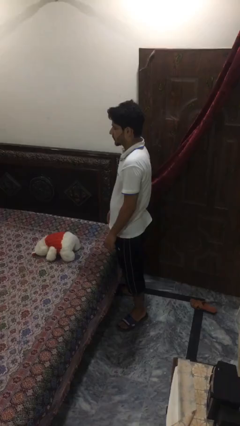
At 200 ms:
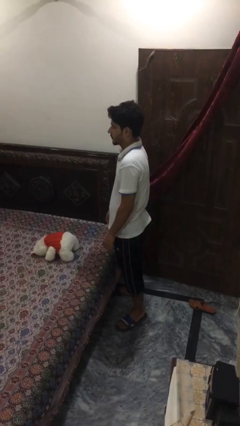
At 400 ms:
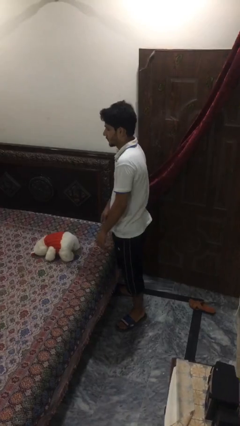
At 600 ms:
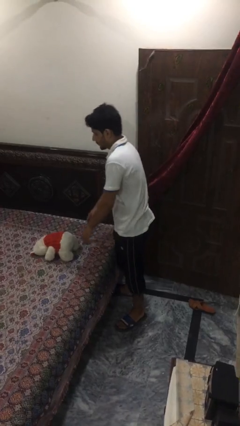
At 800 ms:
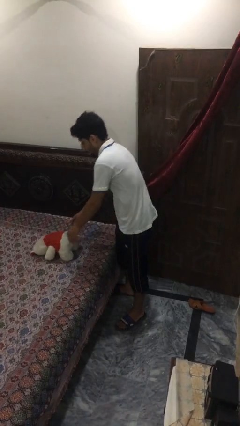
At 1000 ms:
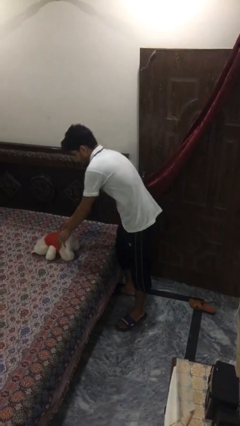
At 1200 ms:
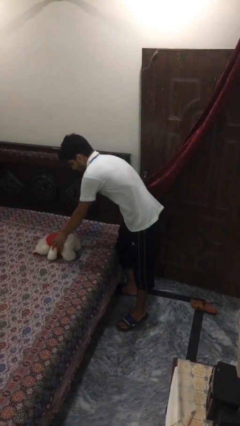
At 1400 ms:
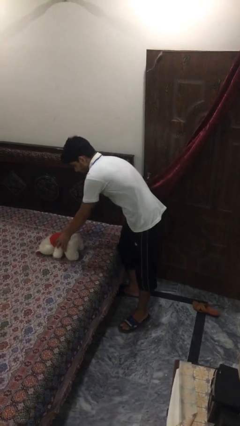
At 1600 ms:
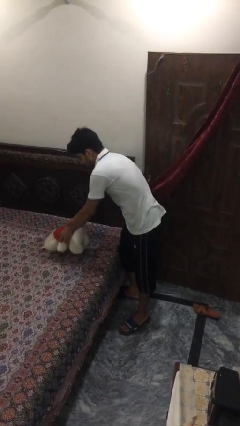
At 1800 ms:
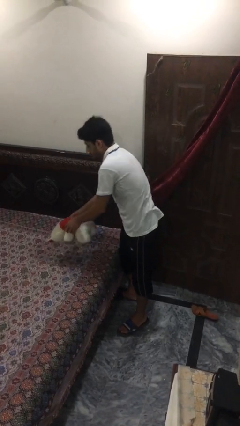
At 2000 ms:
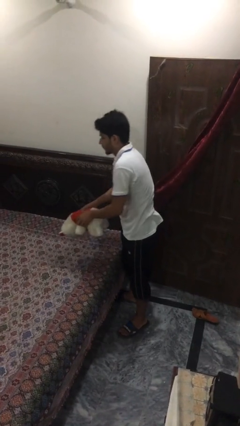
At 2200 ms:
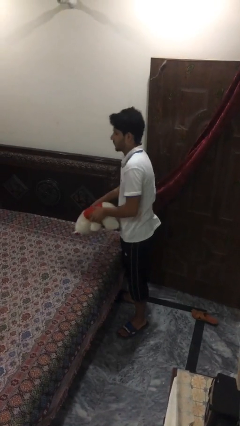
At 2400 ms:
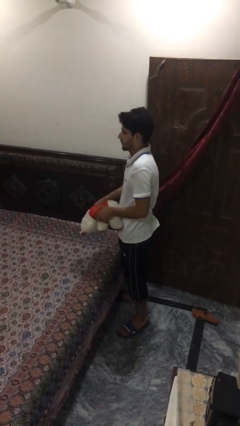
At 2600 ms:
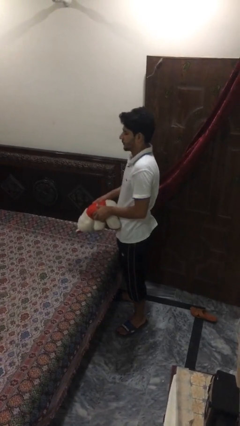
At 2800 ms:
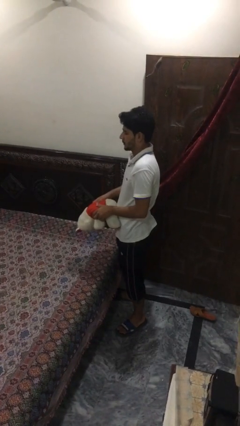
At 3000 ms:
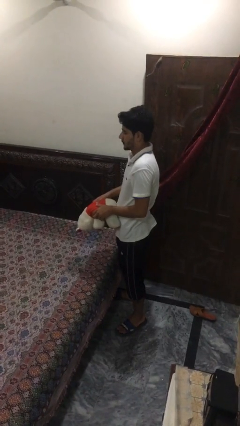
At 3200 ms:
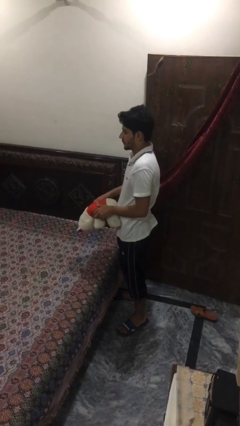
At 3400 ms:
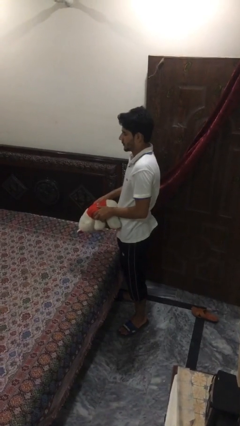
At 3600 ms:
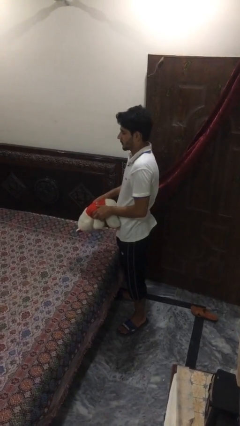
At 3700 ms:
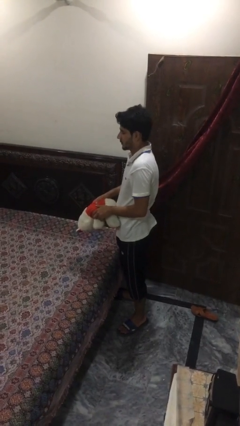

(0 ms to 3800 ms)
person picks up object from bed

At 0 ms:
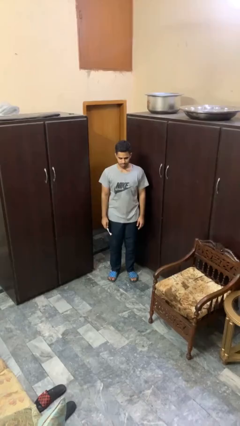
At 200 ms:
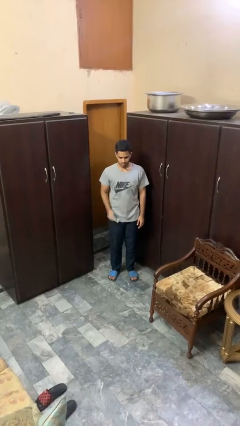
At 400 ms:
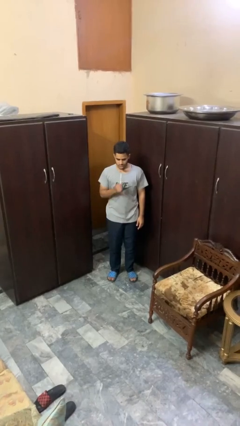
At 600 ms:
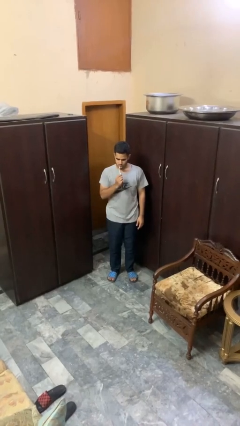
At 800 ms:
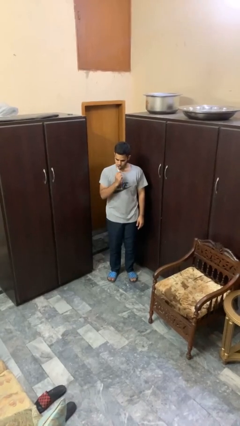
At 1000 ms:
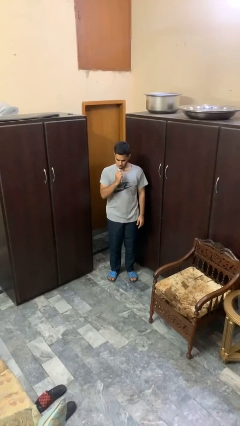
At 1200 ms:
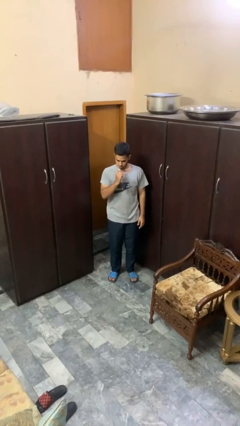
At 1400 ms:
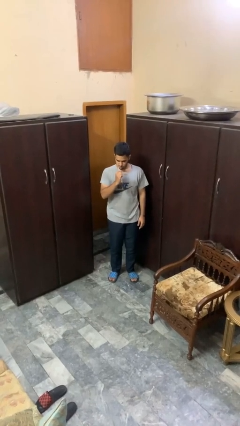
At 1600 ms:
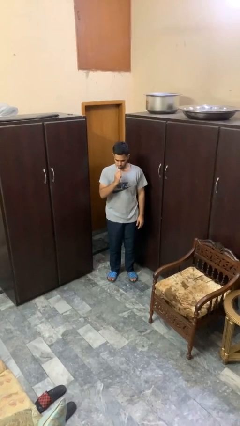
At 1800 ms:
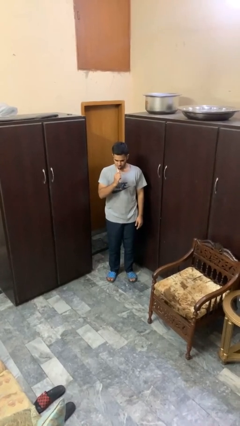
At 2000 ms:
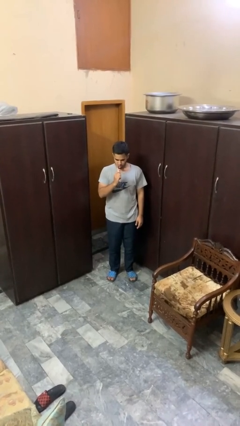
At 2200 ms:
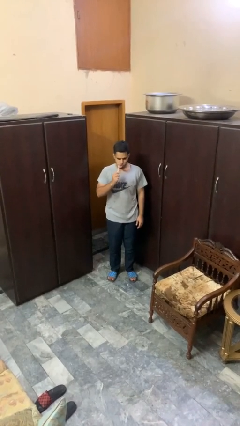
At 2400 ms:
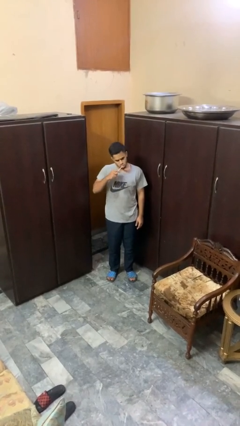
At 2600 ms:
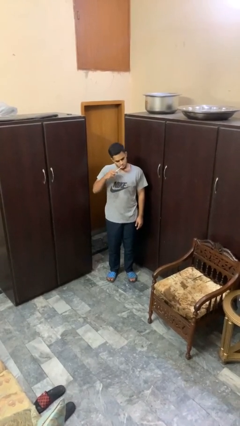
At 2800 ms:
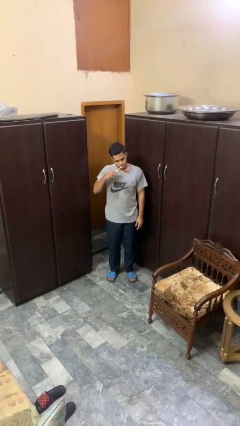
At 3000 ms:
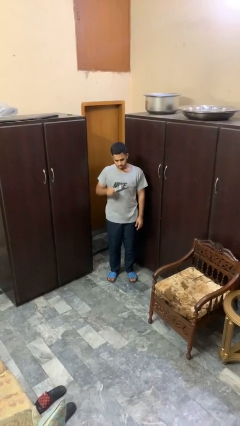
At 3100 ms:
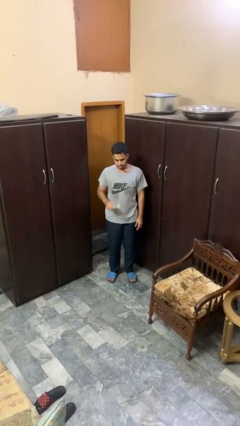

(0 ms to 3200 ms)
person brushes teeth

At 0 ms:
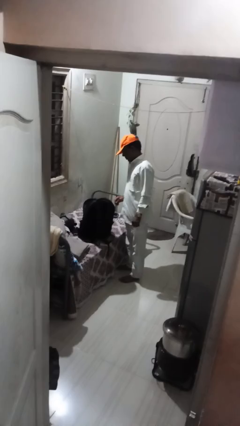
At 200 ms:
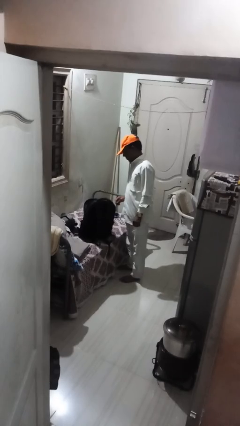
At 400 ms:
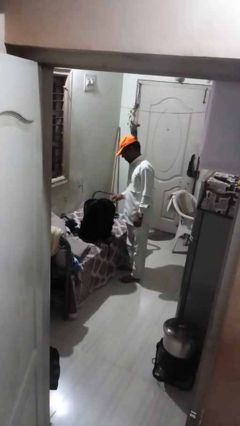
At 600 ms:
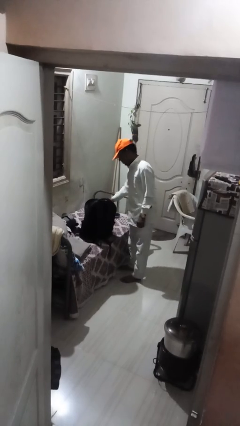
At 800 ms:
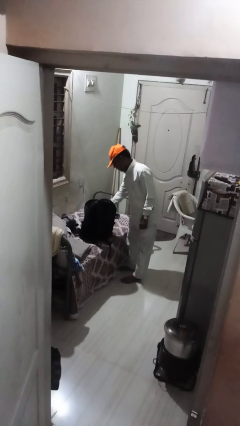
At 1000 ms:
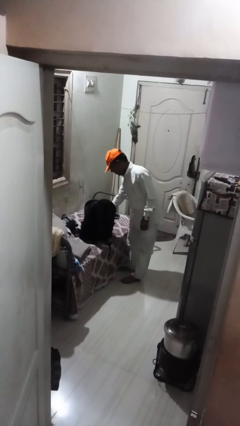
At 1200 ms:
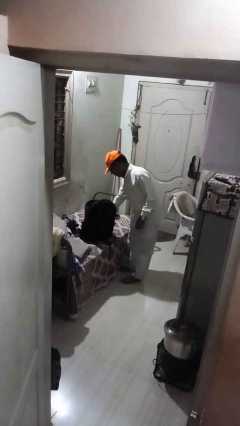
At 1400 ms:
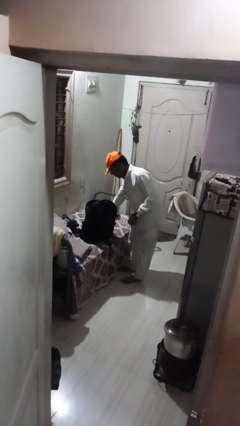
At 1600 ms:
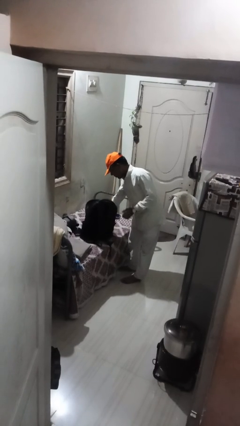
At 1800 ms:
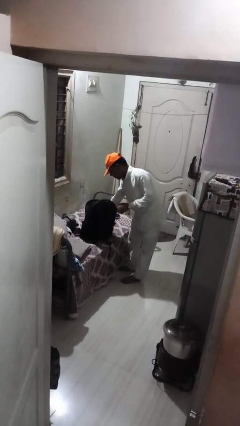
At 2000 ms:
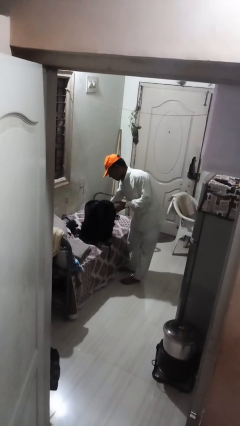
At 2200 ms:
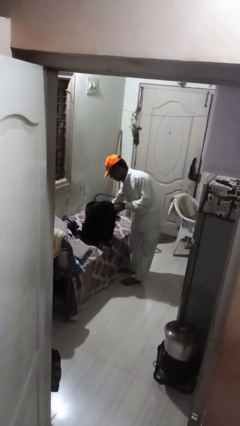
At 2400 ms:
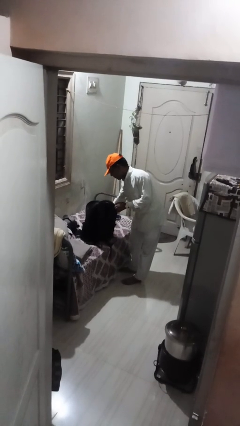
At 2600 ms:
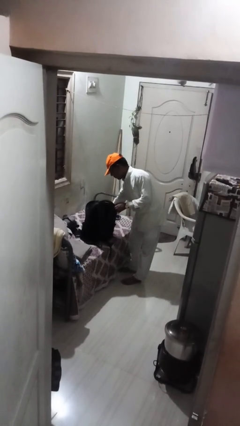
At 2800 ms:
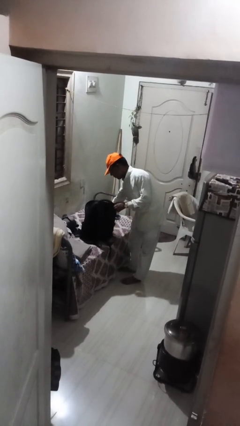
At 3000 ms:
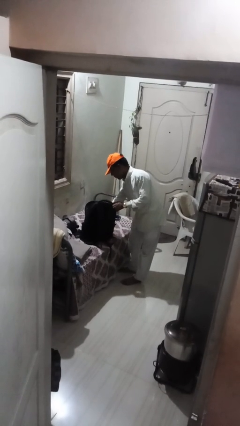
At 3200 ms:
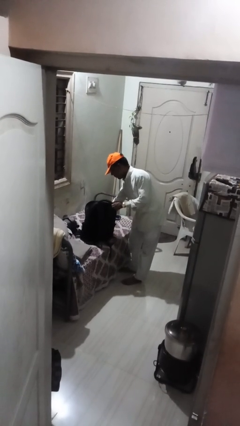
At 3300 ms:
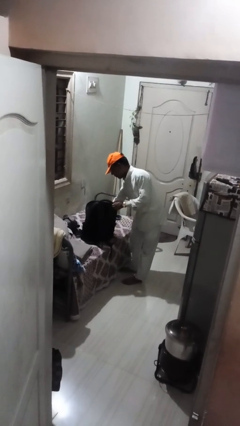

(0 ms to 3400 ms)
person searches in backpack

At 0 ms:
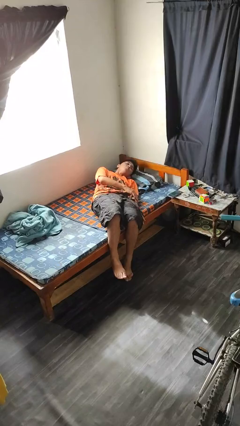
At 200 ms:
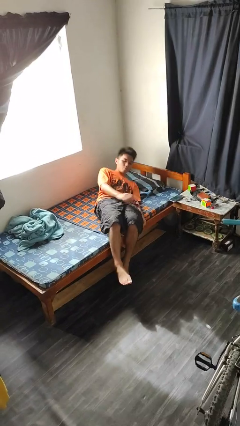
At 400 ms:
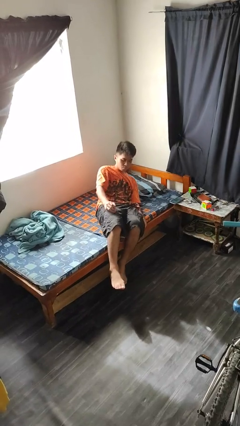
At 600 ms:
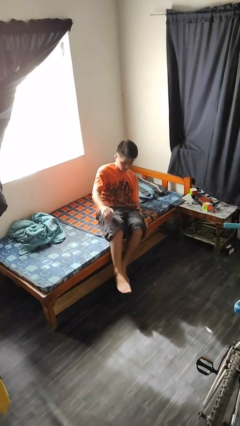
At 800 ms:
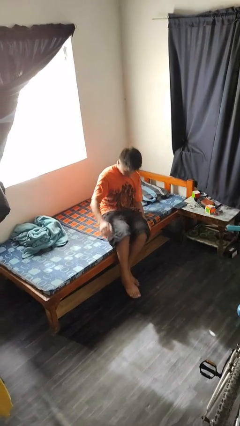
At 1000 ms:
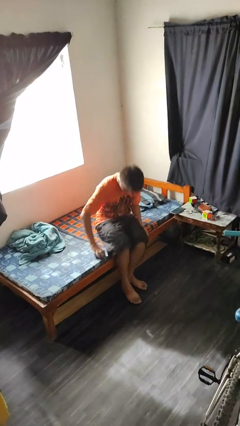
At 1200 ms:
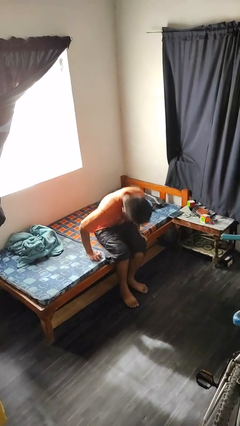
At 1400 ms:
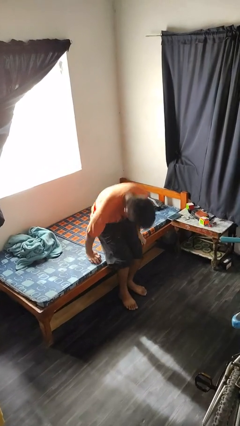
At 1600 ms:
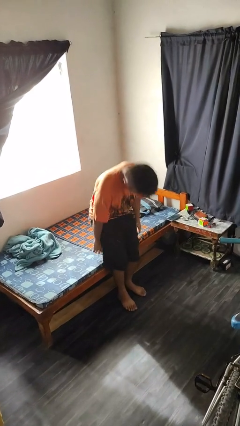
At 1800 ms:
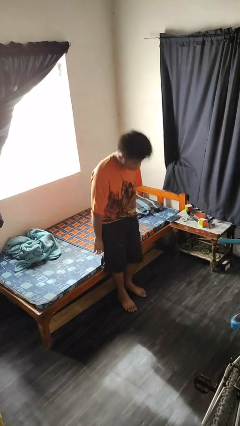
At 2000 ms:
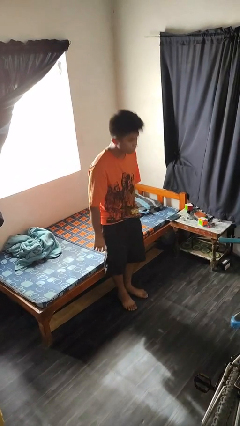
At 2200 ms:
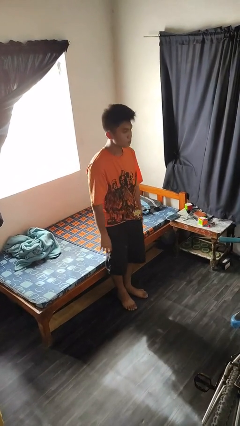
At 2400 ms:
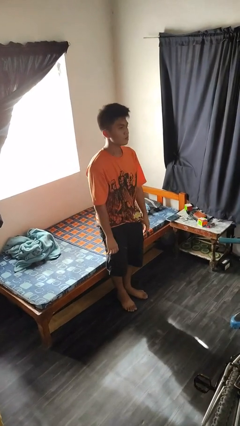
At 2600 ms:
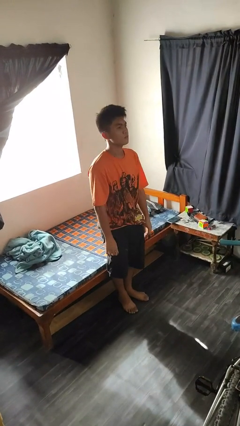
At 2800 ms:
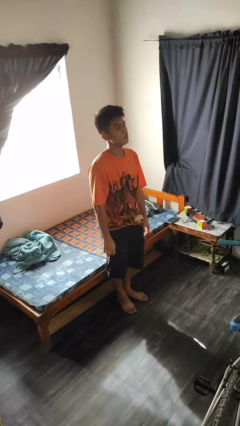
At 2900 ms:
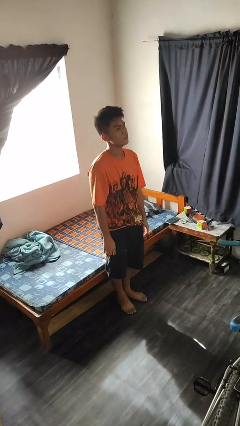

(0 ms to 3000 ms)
person stands up

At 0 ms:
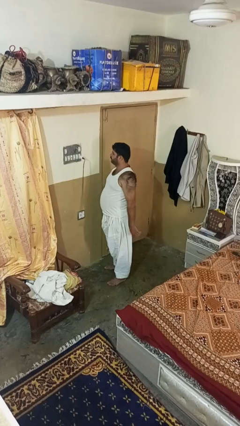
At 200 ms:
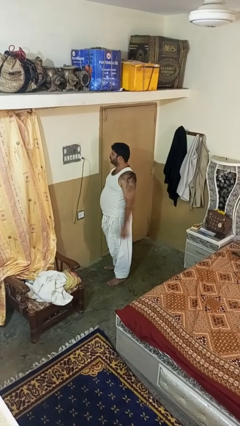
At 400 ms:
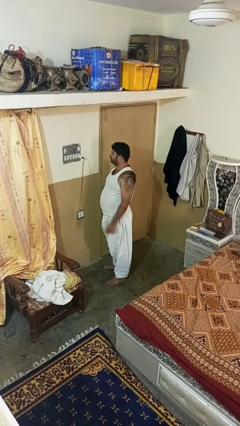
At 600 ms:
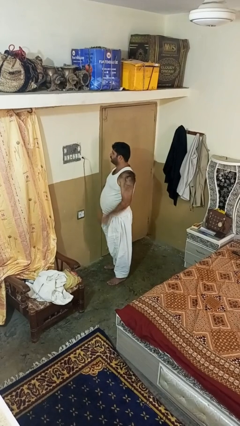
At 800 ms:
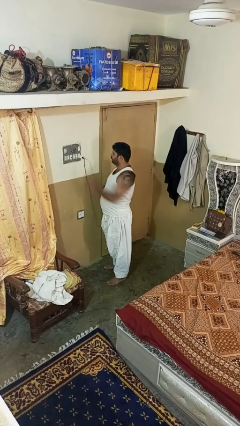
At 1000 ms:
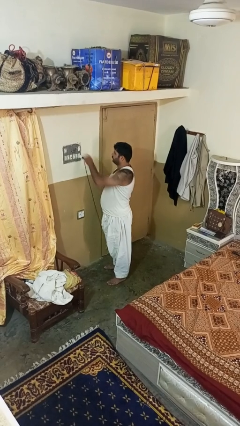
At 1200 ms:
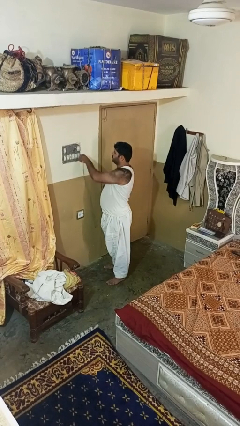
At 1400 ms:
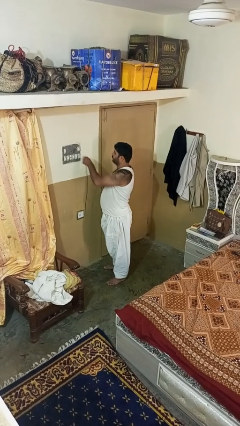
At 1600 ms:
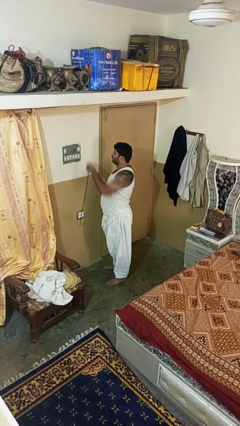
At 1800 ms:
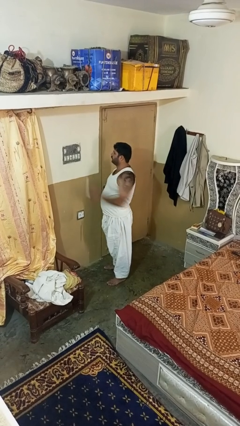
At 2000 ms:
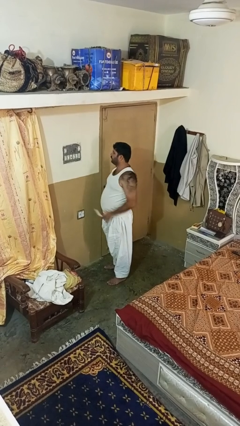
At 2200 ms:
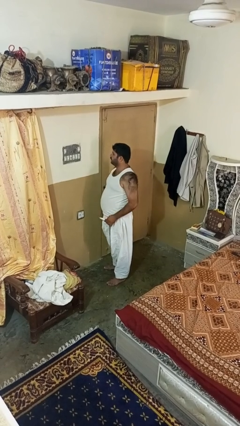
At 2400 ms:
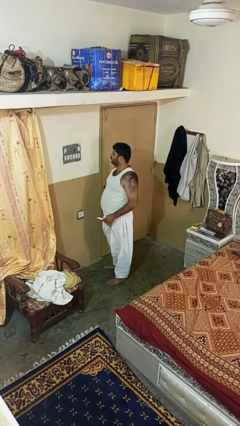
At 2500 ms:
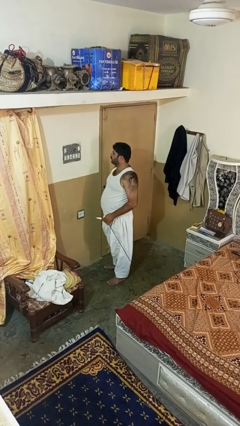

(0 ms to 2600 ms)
person unplugs from electrical socket

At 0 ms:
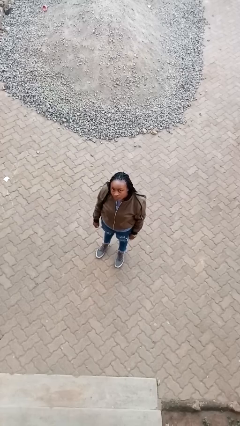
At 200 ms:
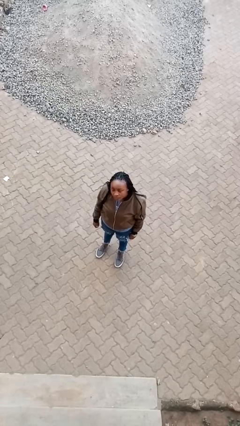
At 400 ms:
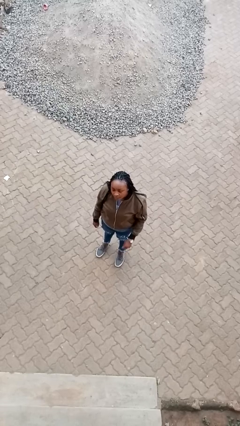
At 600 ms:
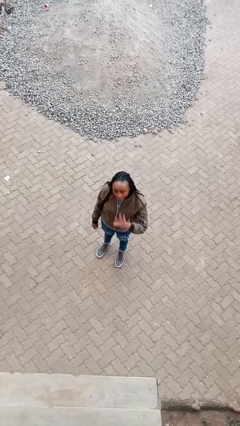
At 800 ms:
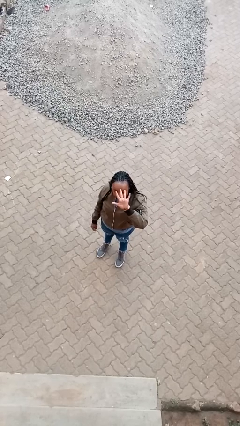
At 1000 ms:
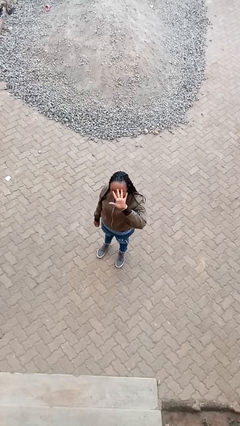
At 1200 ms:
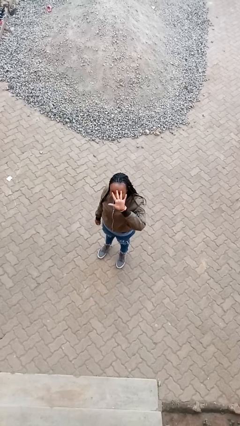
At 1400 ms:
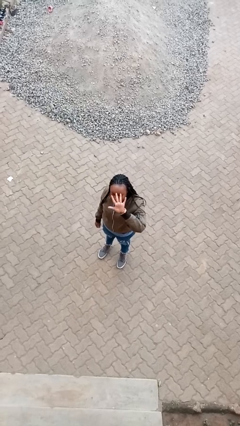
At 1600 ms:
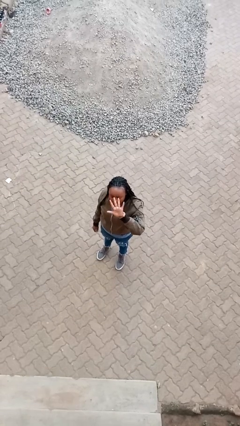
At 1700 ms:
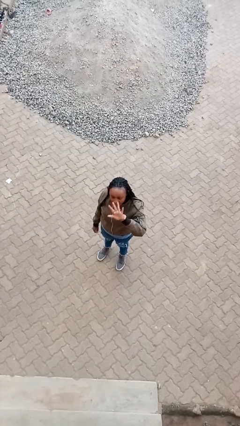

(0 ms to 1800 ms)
person gestures number five
